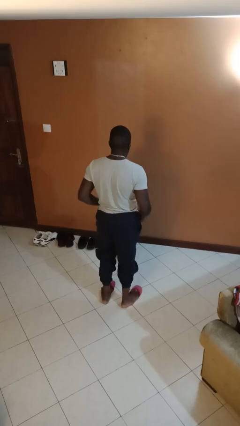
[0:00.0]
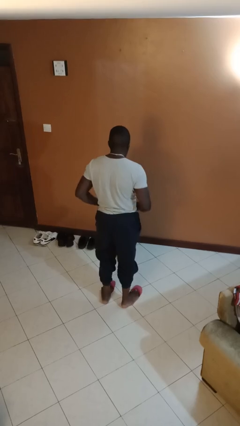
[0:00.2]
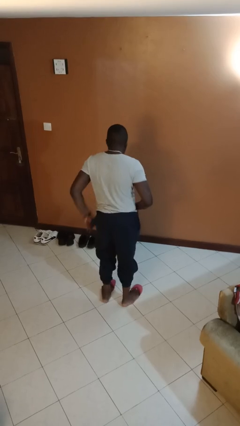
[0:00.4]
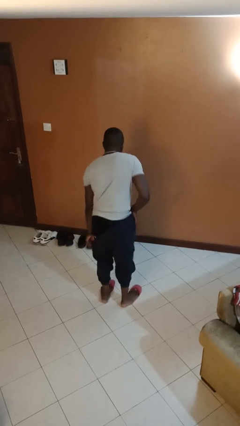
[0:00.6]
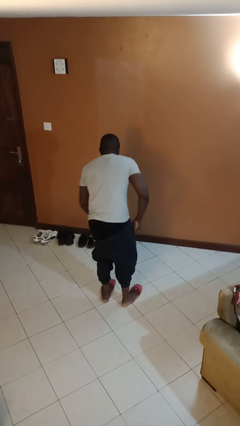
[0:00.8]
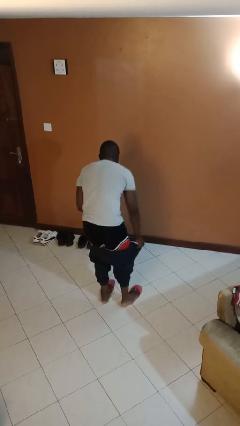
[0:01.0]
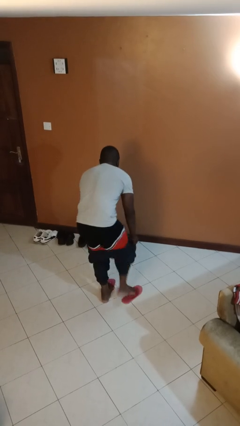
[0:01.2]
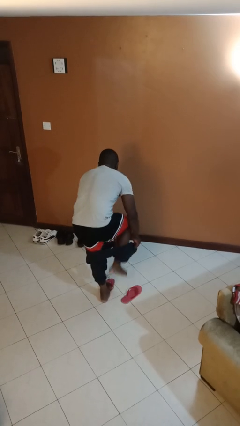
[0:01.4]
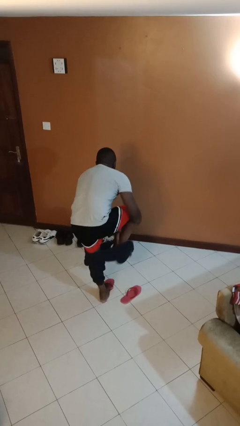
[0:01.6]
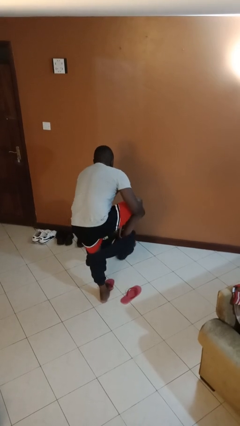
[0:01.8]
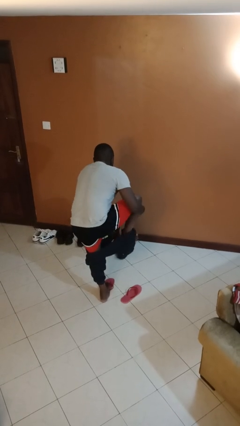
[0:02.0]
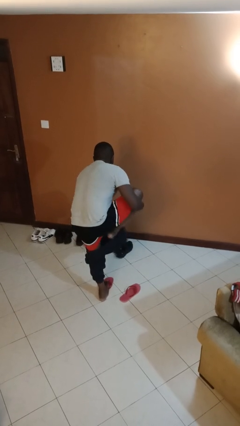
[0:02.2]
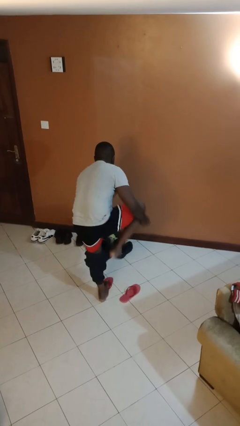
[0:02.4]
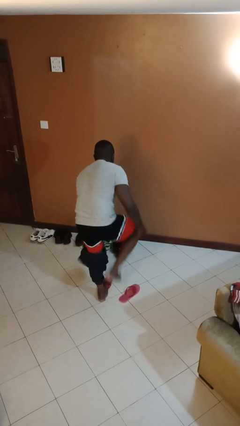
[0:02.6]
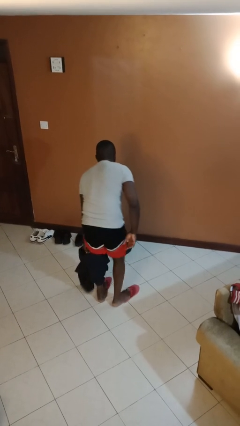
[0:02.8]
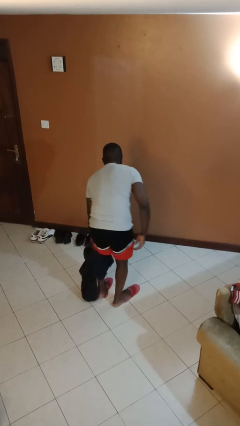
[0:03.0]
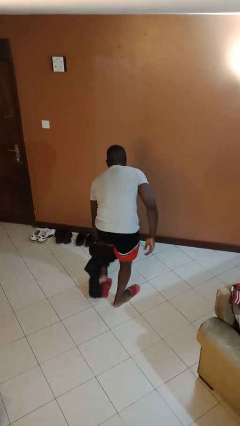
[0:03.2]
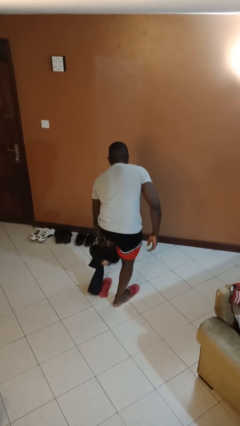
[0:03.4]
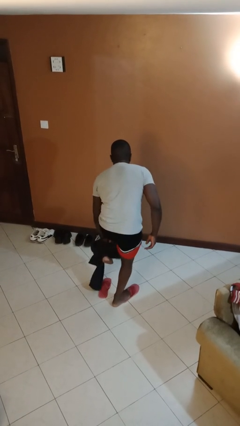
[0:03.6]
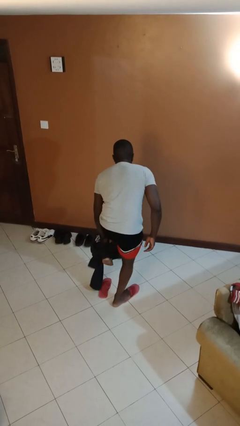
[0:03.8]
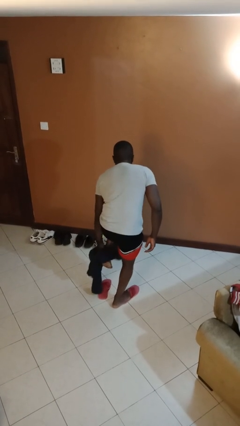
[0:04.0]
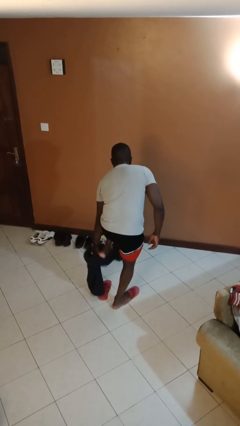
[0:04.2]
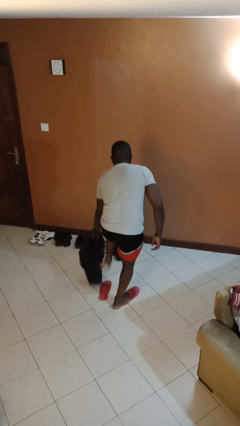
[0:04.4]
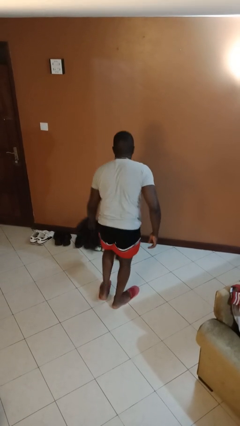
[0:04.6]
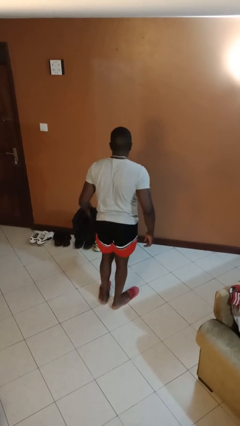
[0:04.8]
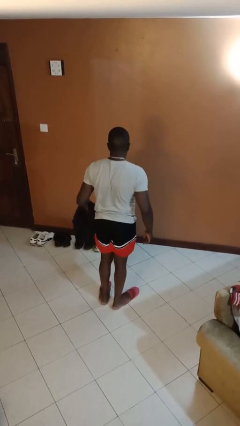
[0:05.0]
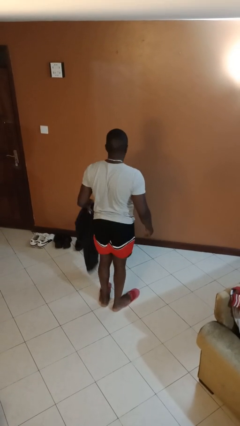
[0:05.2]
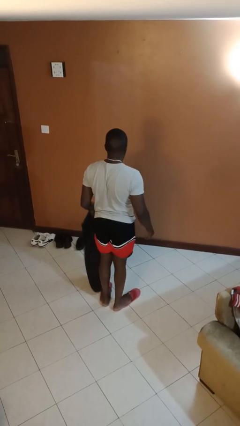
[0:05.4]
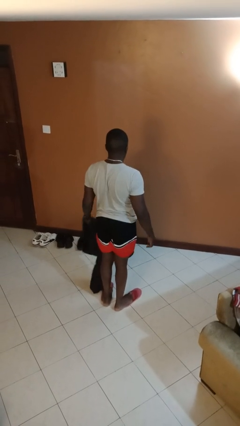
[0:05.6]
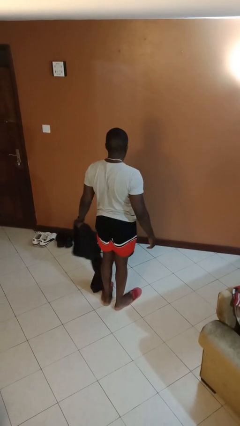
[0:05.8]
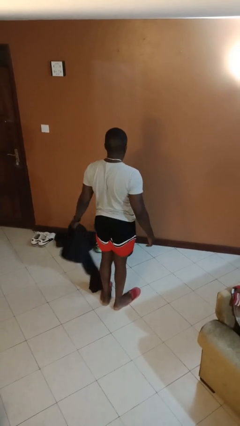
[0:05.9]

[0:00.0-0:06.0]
person takes off pants

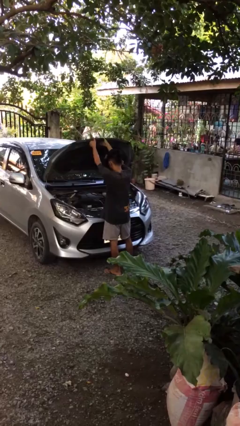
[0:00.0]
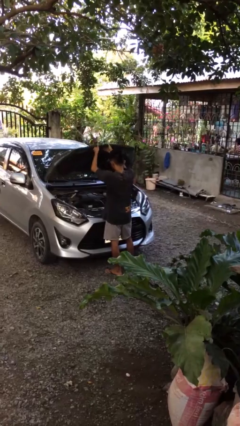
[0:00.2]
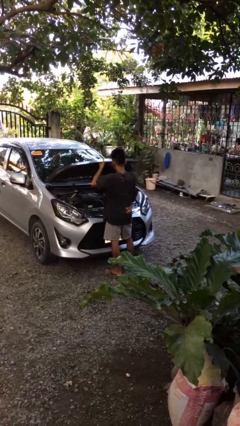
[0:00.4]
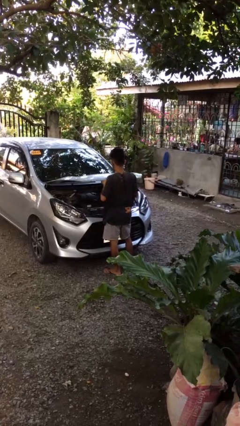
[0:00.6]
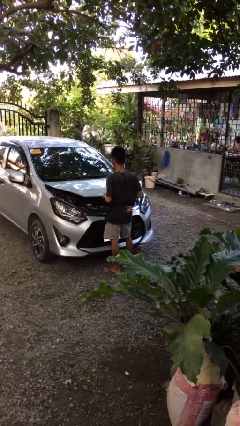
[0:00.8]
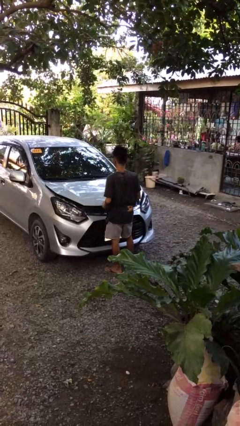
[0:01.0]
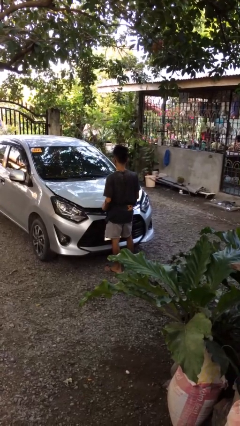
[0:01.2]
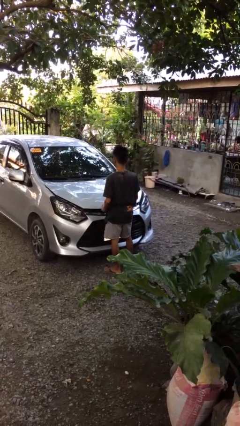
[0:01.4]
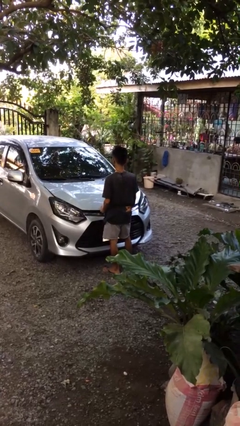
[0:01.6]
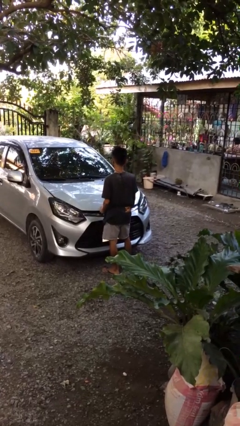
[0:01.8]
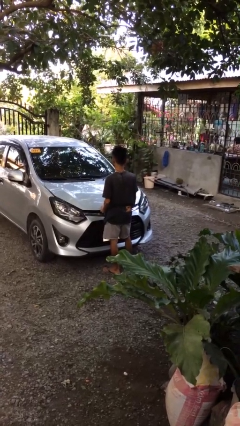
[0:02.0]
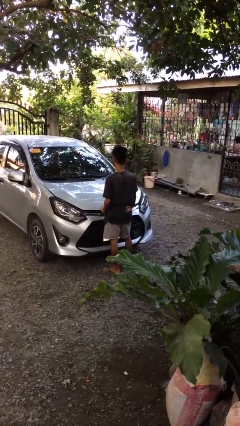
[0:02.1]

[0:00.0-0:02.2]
person closes car hood

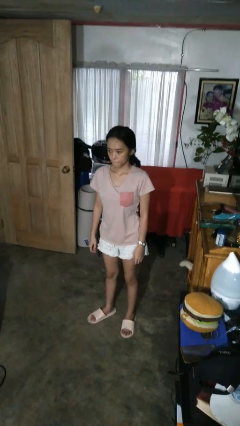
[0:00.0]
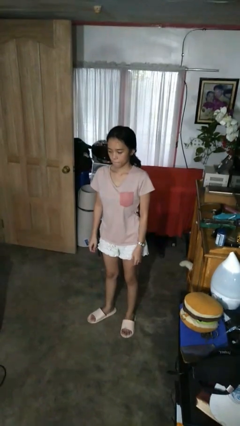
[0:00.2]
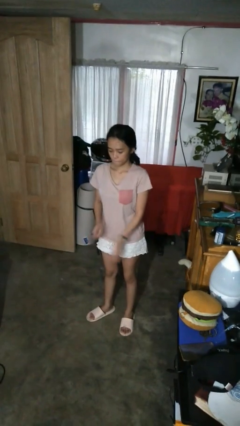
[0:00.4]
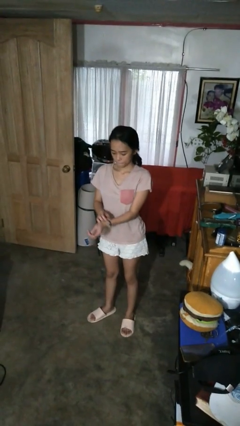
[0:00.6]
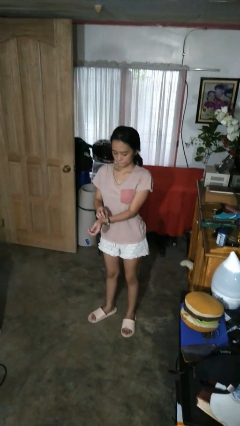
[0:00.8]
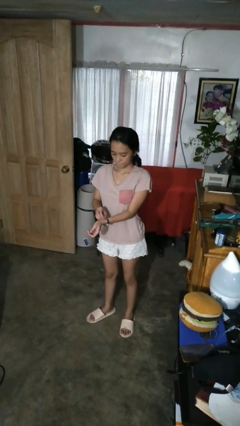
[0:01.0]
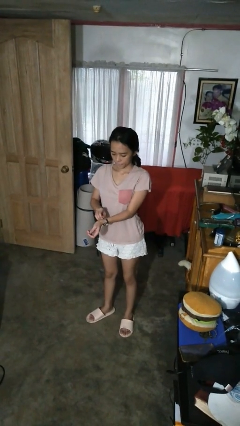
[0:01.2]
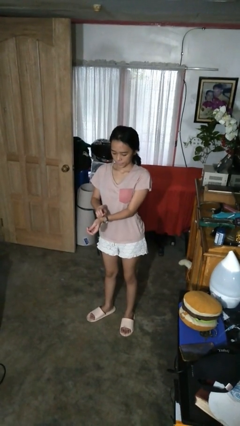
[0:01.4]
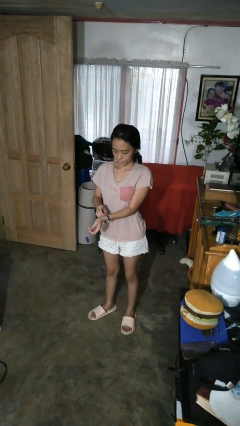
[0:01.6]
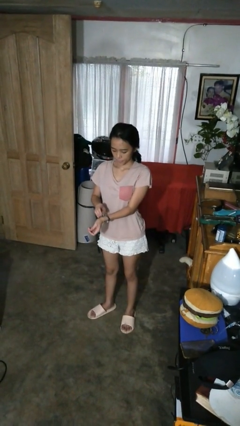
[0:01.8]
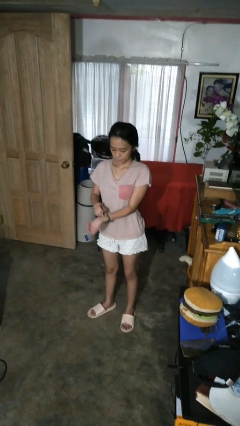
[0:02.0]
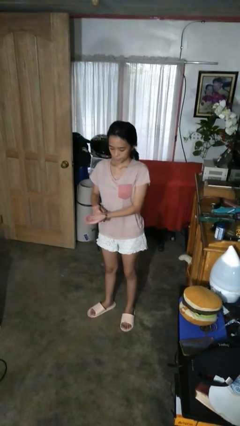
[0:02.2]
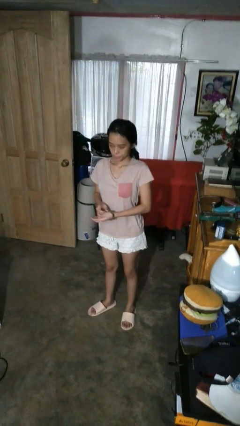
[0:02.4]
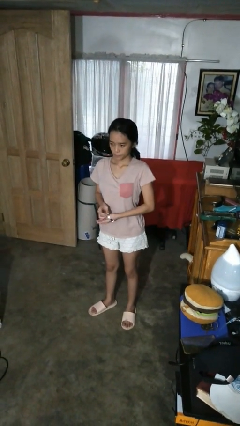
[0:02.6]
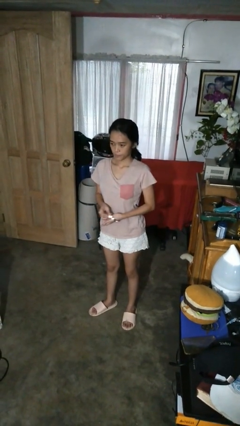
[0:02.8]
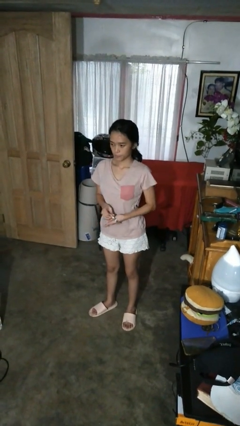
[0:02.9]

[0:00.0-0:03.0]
person takes off wristwatch

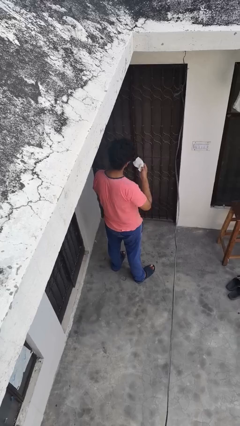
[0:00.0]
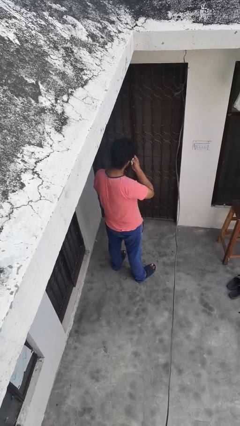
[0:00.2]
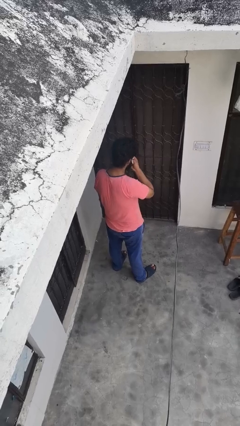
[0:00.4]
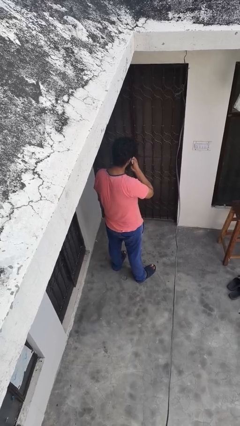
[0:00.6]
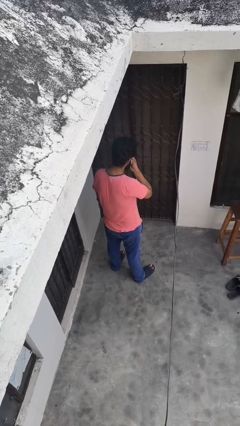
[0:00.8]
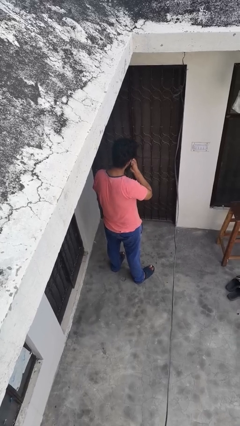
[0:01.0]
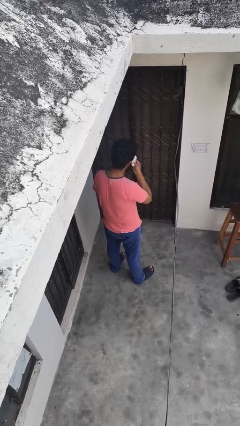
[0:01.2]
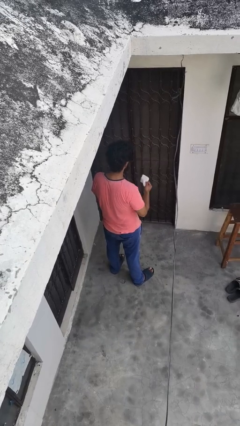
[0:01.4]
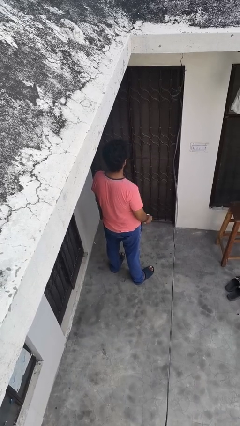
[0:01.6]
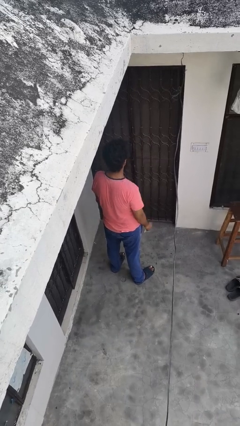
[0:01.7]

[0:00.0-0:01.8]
person wipes mouth with napkin

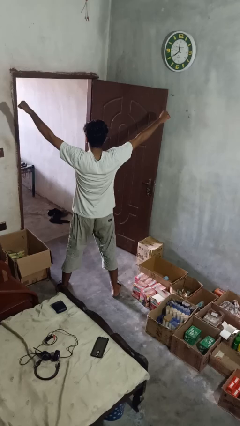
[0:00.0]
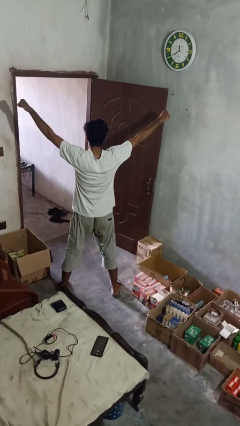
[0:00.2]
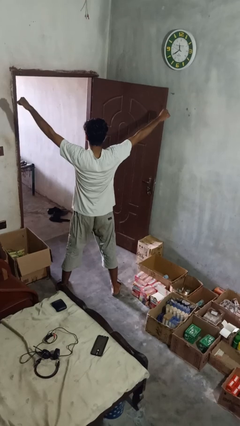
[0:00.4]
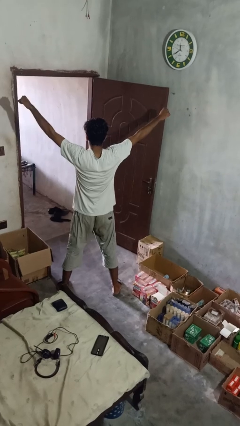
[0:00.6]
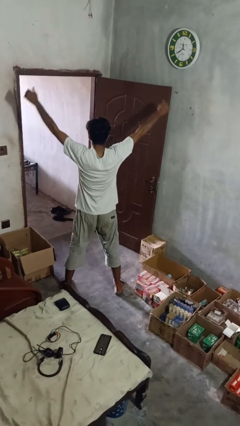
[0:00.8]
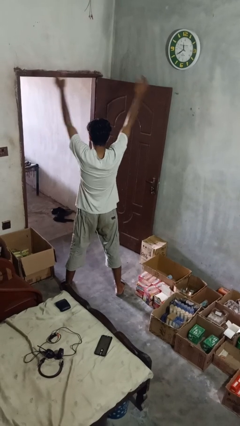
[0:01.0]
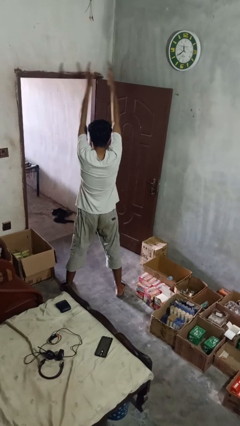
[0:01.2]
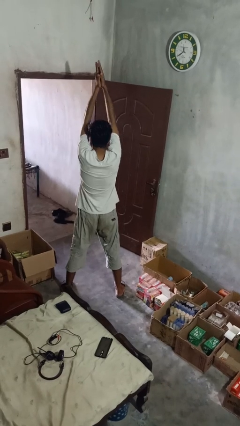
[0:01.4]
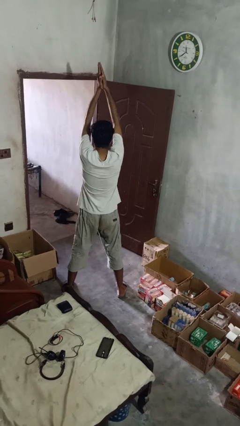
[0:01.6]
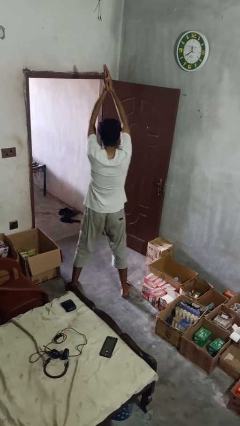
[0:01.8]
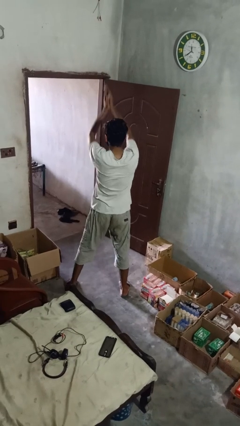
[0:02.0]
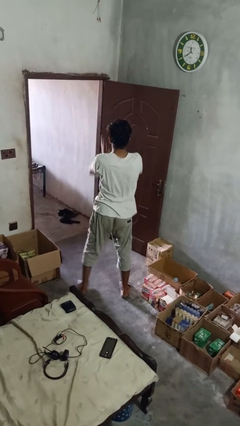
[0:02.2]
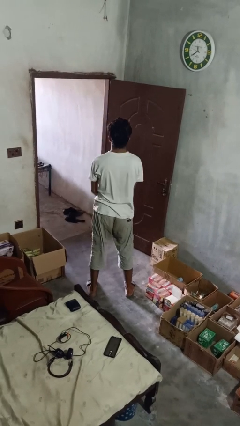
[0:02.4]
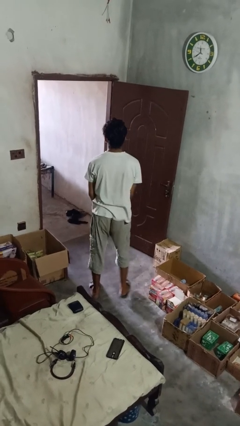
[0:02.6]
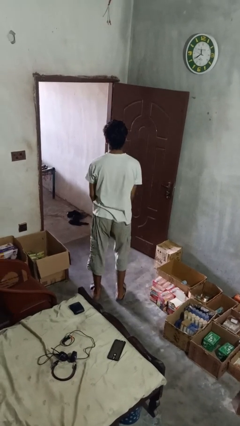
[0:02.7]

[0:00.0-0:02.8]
person stretches arms over head

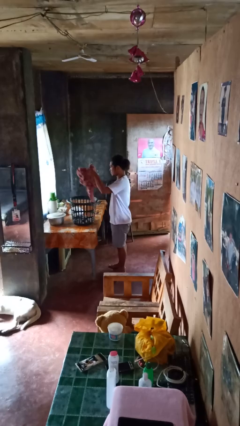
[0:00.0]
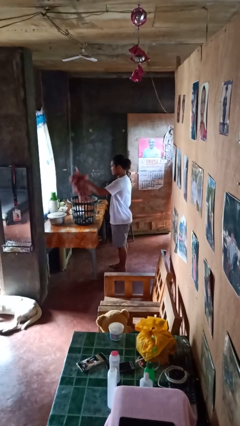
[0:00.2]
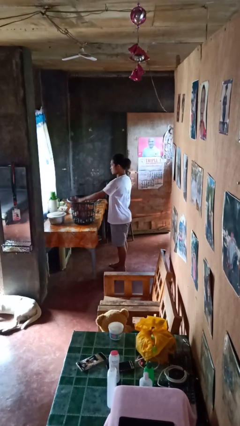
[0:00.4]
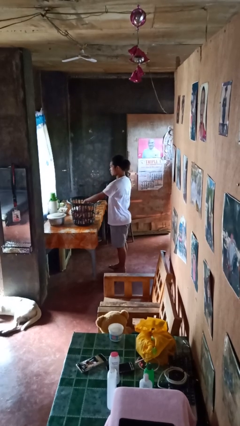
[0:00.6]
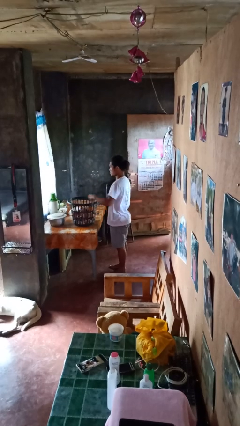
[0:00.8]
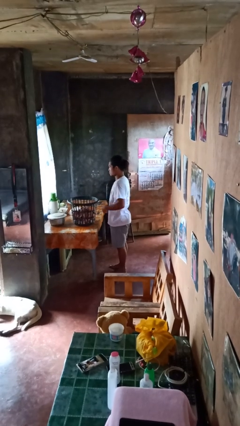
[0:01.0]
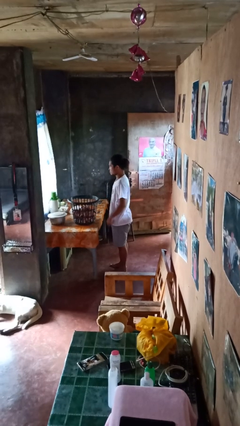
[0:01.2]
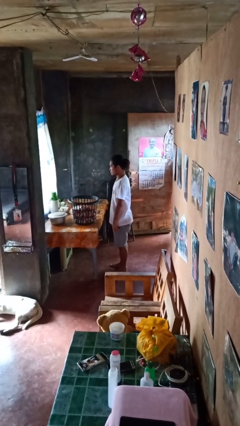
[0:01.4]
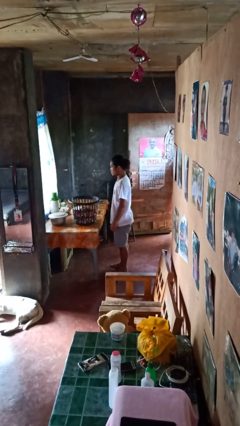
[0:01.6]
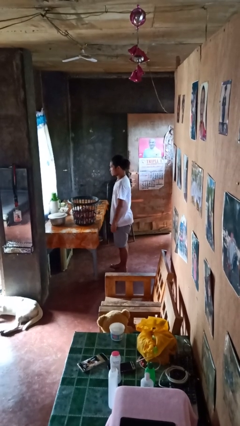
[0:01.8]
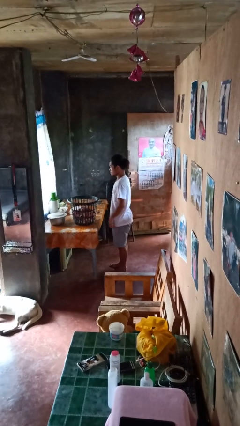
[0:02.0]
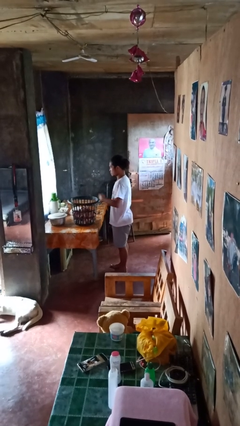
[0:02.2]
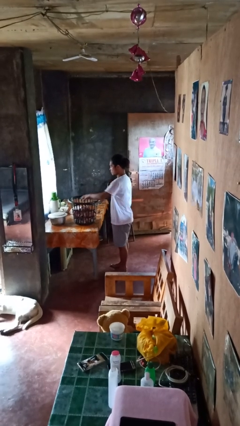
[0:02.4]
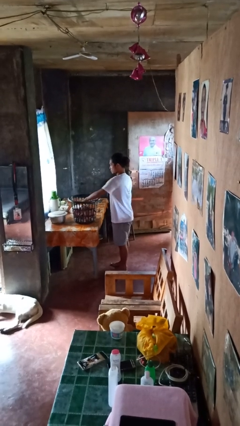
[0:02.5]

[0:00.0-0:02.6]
person puts object into basket
